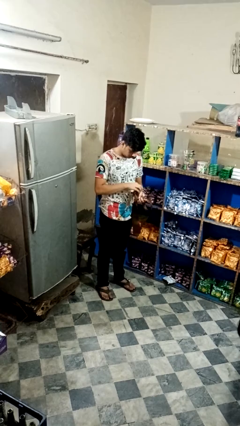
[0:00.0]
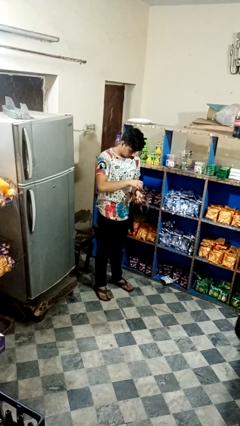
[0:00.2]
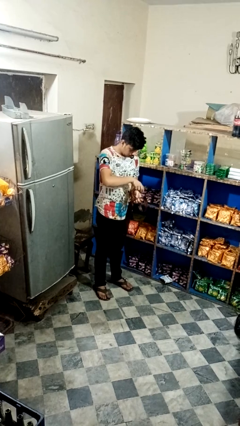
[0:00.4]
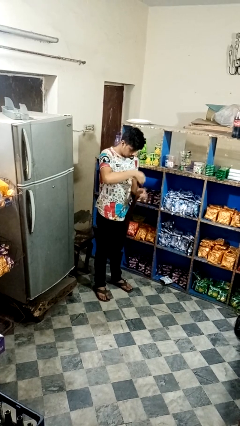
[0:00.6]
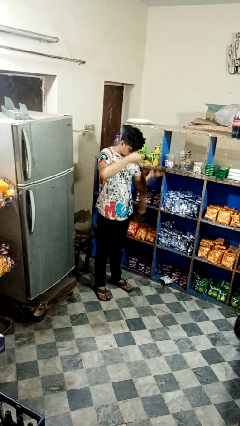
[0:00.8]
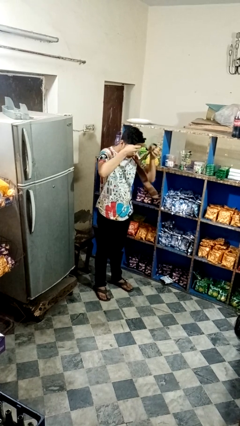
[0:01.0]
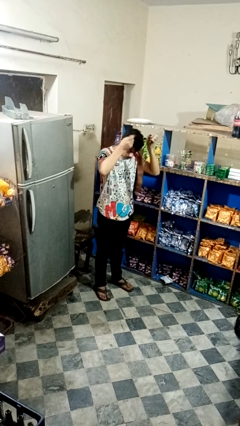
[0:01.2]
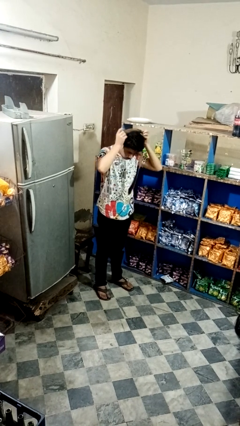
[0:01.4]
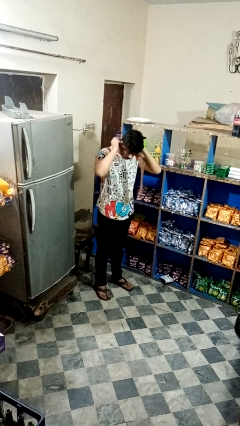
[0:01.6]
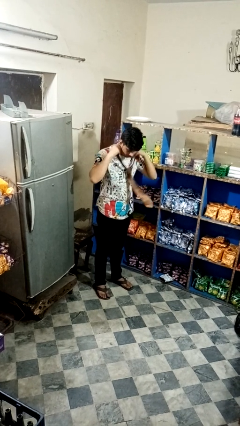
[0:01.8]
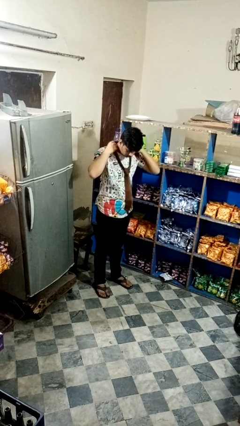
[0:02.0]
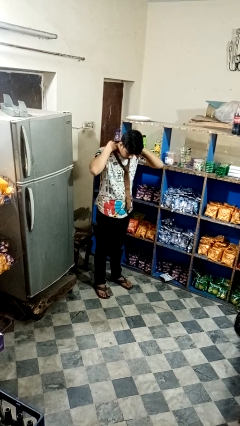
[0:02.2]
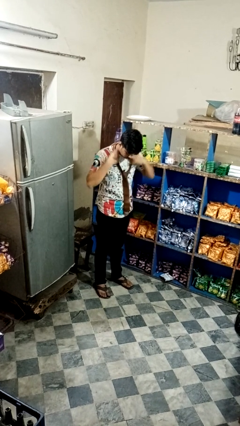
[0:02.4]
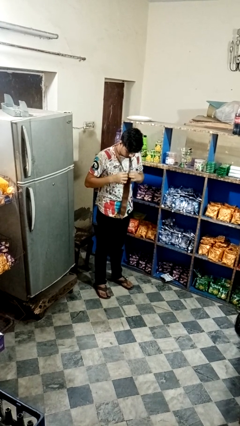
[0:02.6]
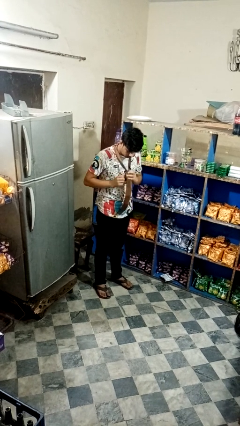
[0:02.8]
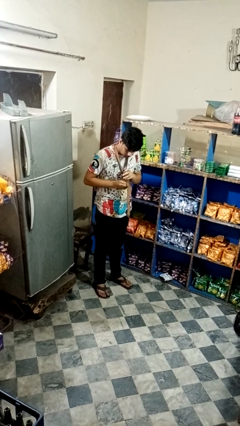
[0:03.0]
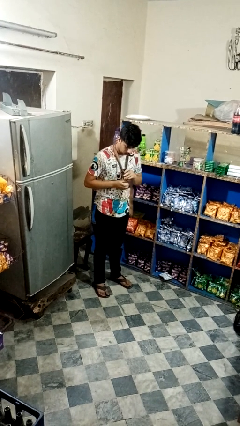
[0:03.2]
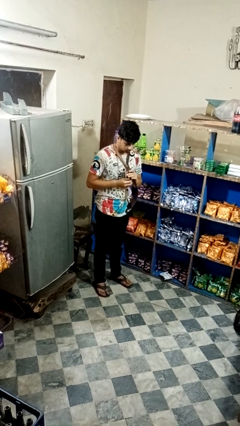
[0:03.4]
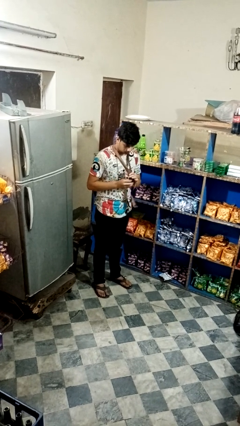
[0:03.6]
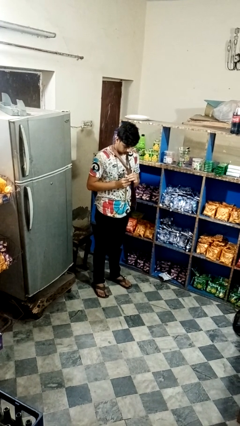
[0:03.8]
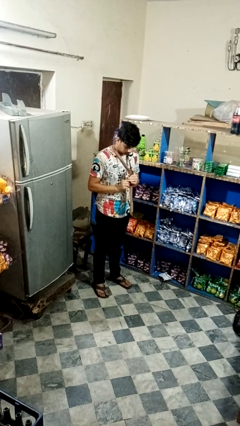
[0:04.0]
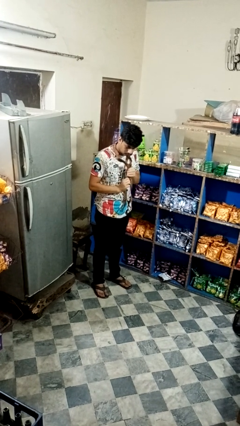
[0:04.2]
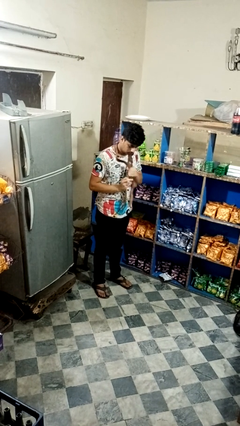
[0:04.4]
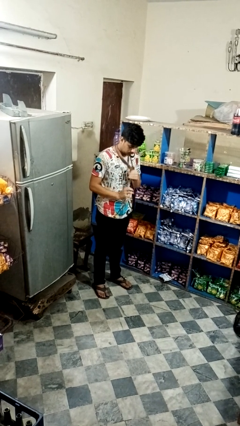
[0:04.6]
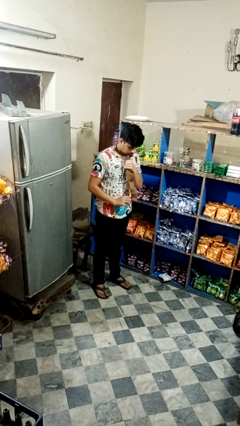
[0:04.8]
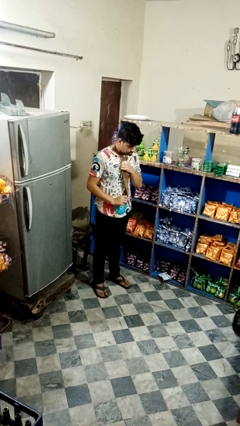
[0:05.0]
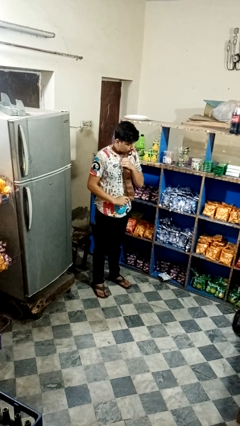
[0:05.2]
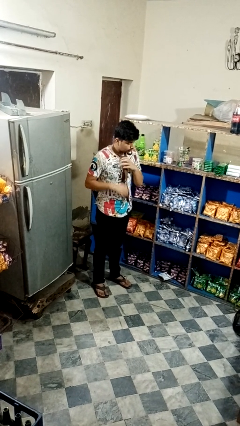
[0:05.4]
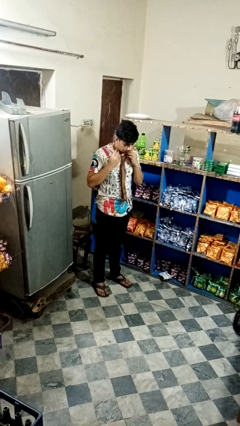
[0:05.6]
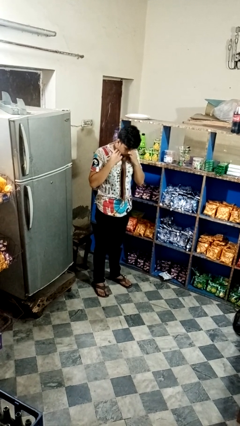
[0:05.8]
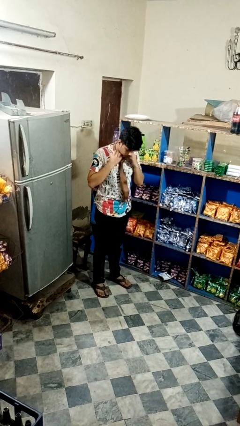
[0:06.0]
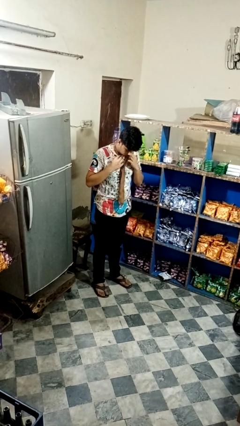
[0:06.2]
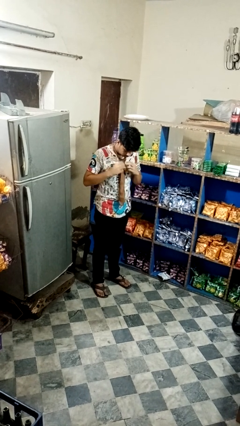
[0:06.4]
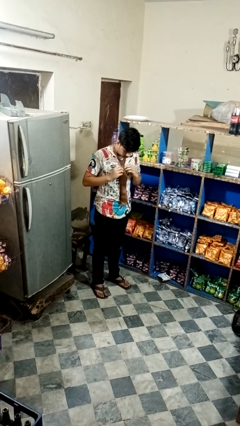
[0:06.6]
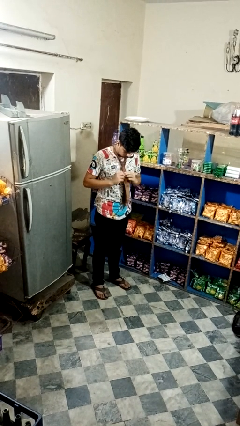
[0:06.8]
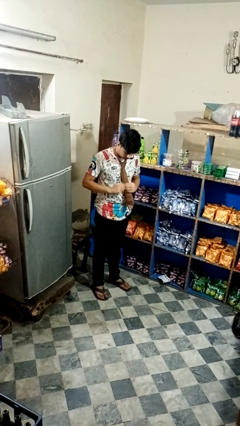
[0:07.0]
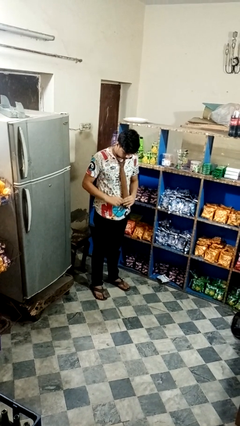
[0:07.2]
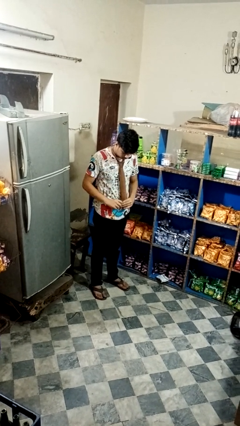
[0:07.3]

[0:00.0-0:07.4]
person puts on necktie

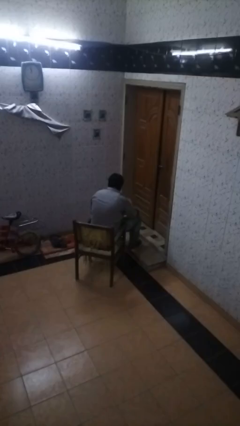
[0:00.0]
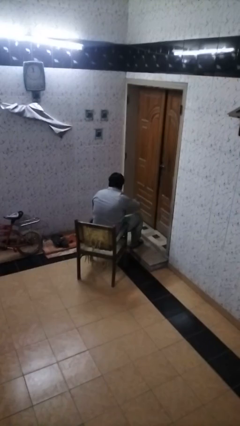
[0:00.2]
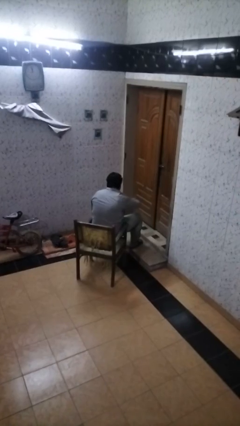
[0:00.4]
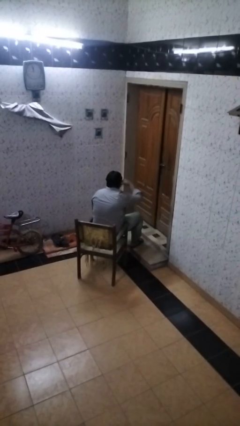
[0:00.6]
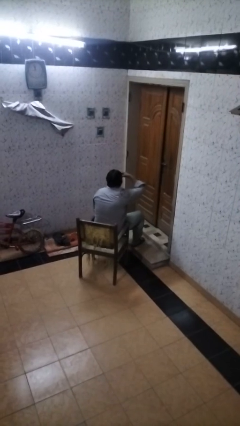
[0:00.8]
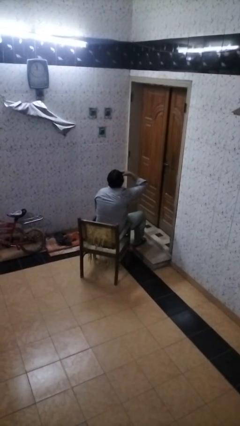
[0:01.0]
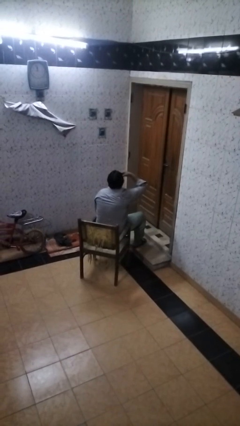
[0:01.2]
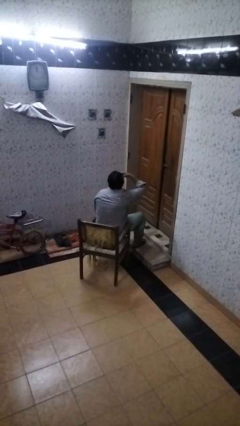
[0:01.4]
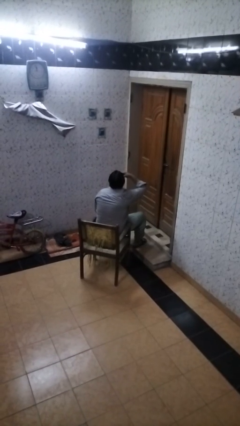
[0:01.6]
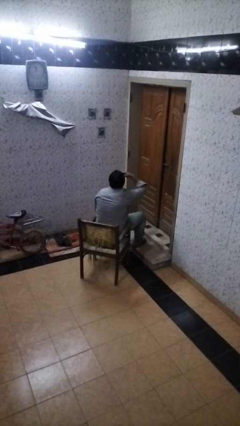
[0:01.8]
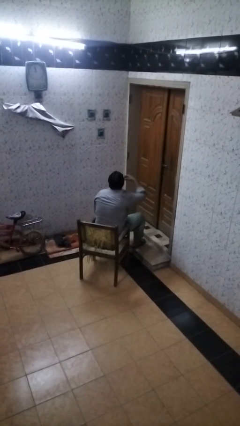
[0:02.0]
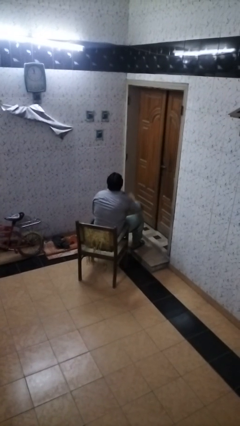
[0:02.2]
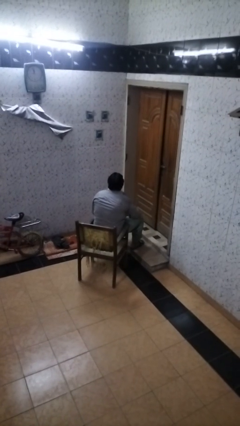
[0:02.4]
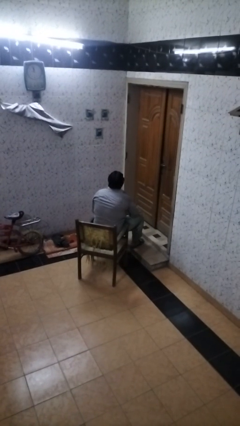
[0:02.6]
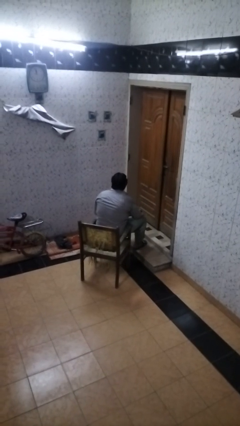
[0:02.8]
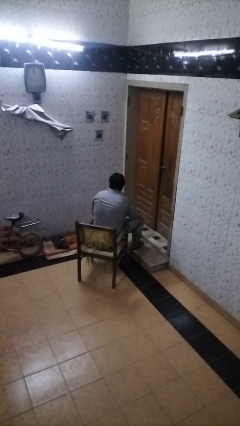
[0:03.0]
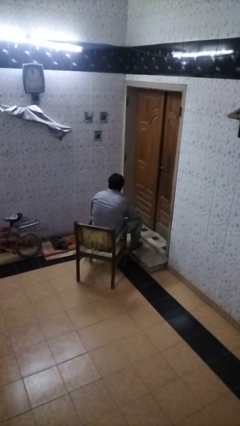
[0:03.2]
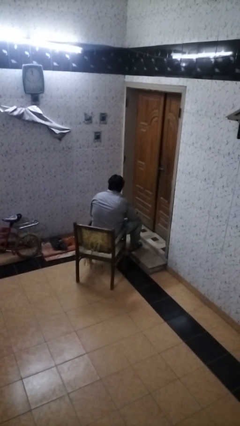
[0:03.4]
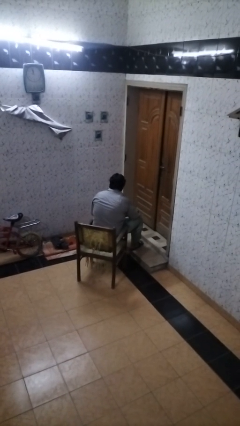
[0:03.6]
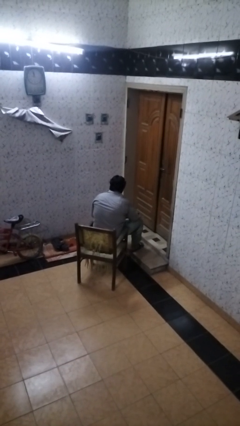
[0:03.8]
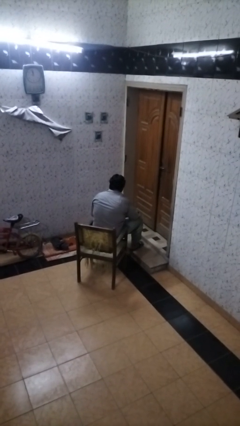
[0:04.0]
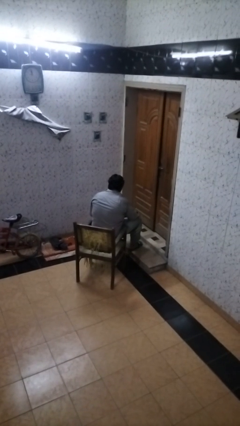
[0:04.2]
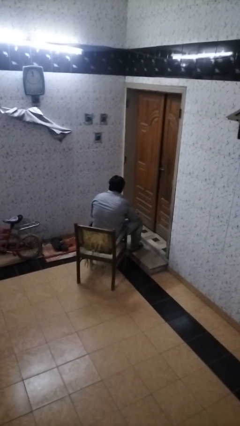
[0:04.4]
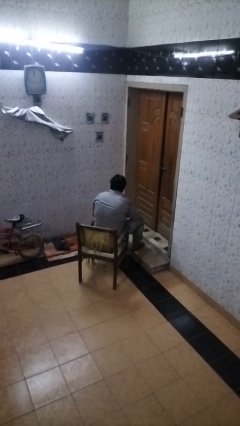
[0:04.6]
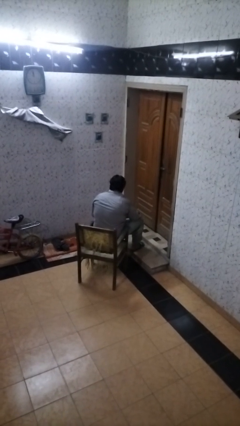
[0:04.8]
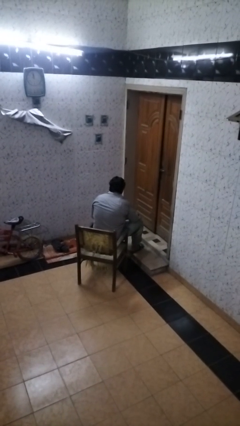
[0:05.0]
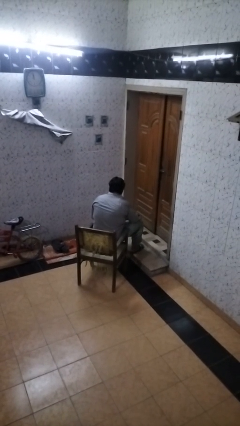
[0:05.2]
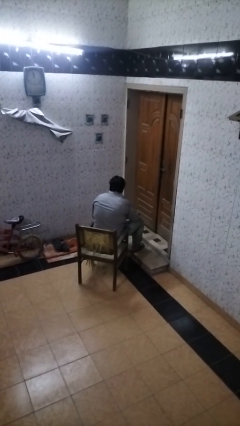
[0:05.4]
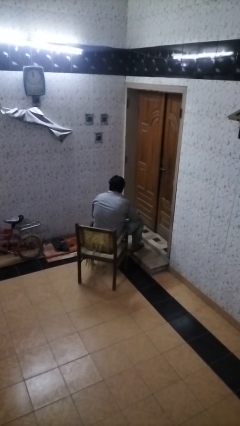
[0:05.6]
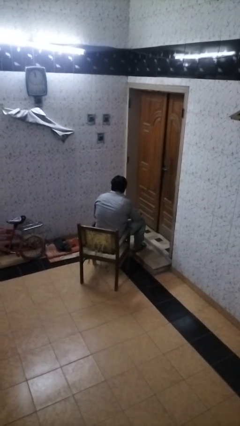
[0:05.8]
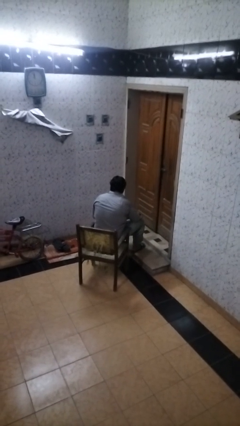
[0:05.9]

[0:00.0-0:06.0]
person eats with hands

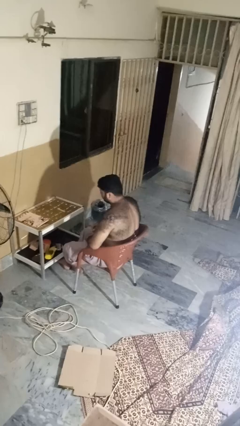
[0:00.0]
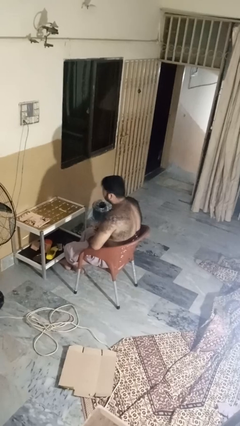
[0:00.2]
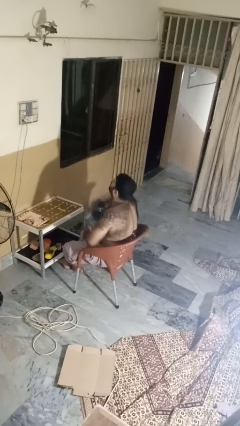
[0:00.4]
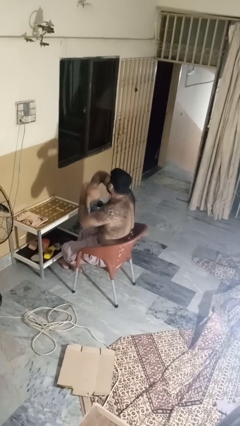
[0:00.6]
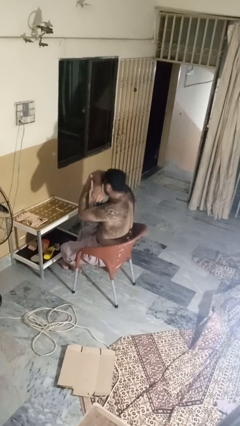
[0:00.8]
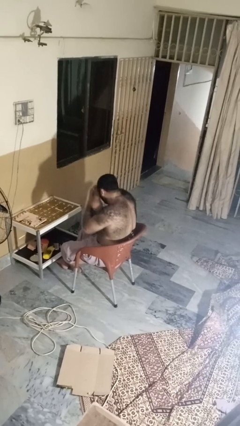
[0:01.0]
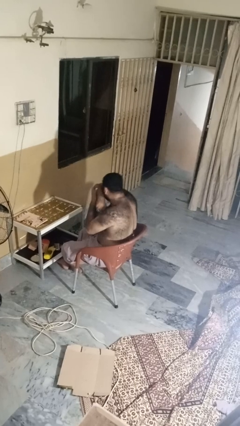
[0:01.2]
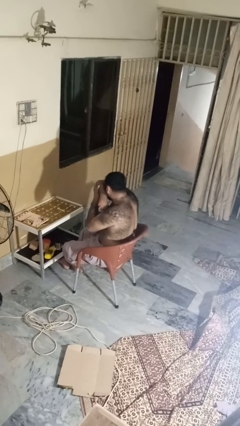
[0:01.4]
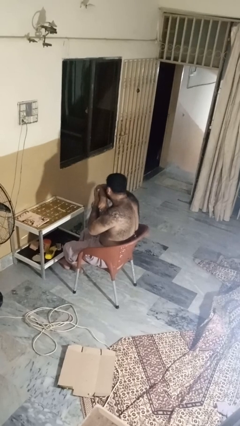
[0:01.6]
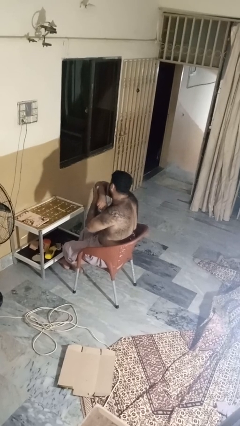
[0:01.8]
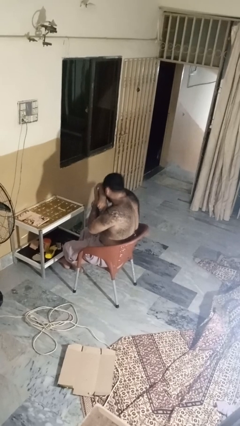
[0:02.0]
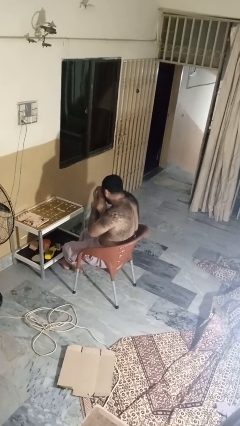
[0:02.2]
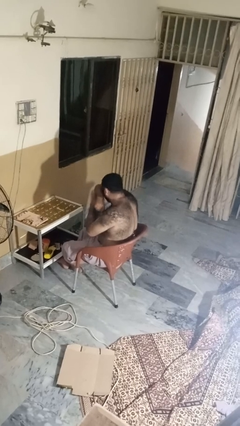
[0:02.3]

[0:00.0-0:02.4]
person sneezes into arm

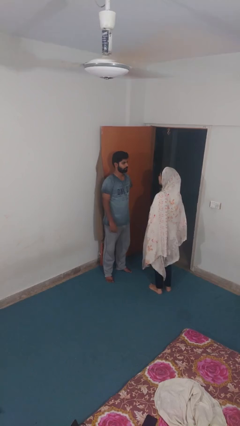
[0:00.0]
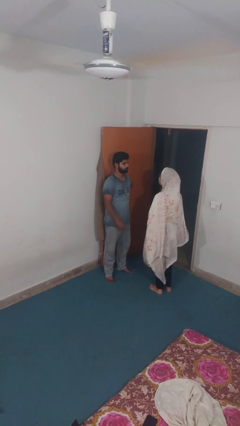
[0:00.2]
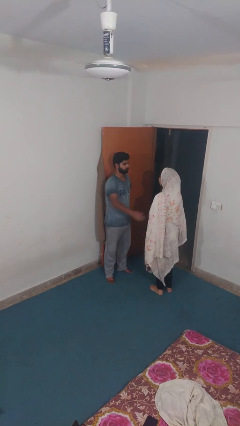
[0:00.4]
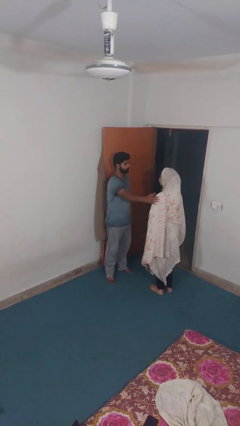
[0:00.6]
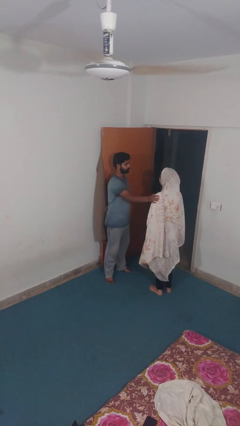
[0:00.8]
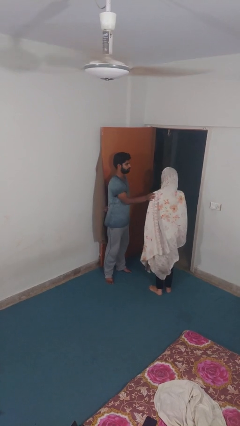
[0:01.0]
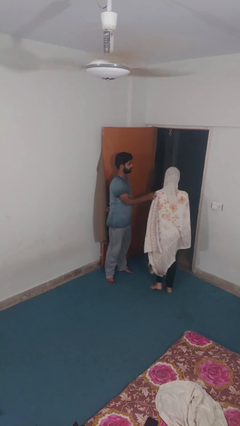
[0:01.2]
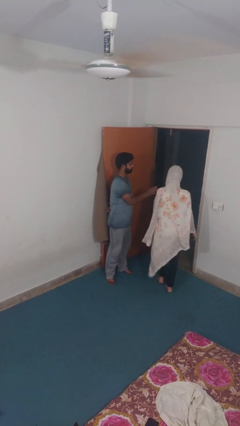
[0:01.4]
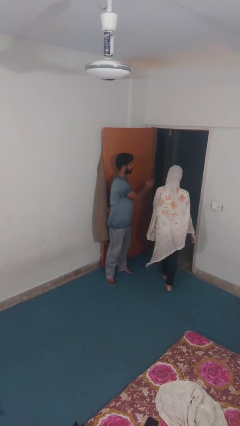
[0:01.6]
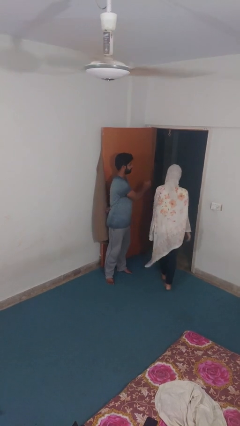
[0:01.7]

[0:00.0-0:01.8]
person shoves person
